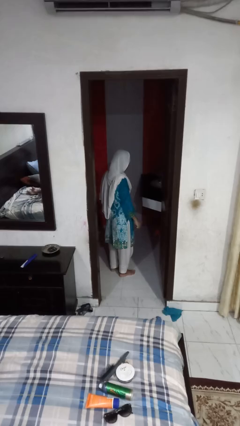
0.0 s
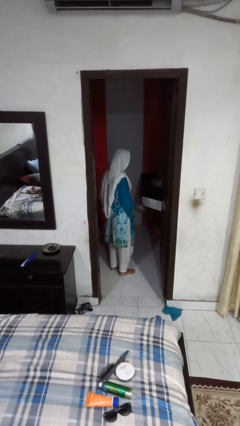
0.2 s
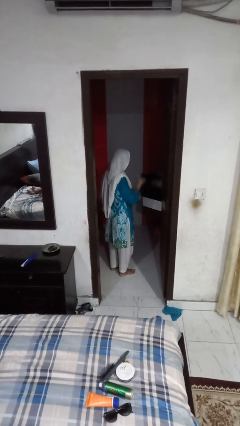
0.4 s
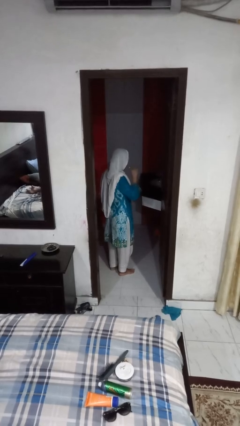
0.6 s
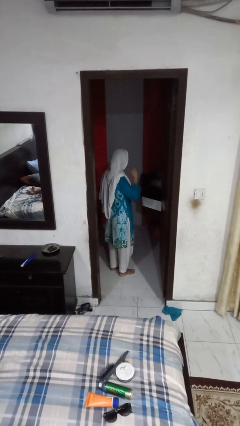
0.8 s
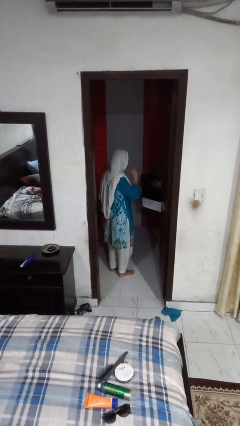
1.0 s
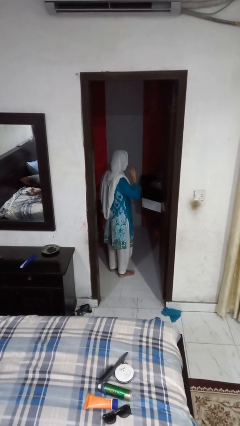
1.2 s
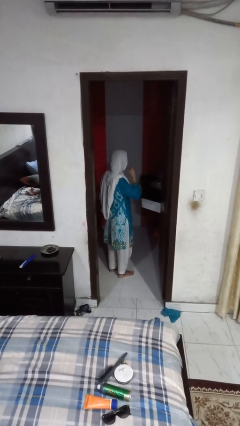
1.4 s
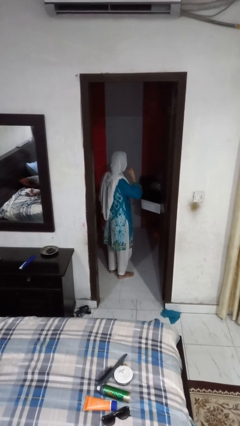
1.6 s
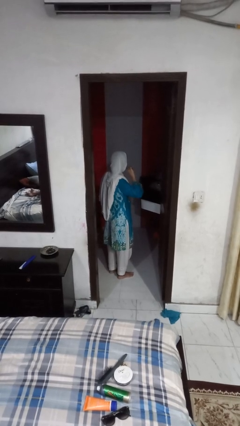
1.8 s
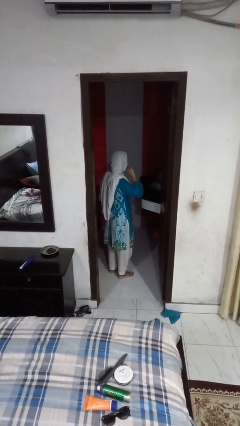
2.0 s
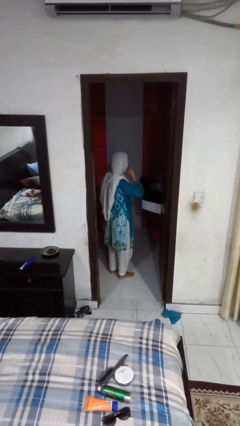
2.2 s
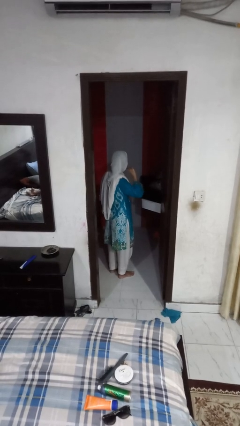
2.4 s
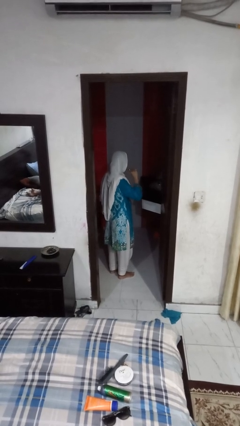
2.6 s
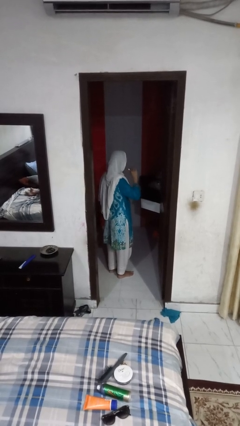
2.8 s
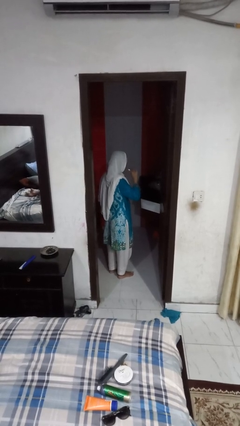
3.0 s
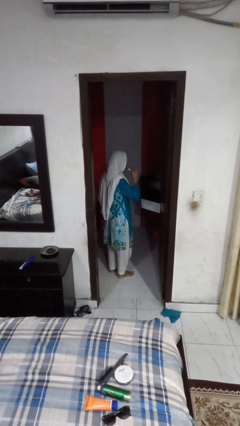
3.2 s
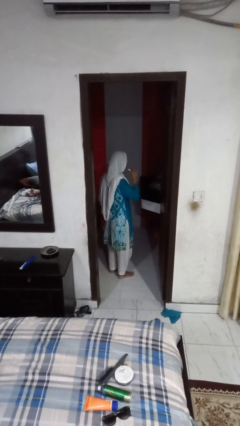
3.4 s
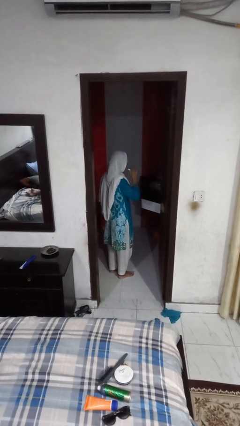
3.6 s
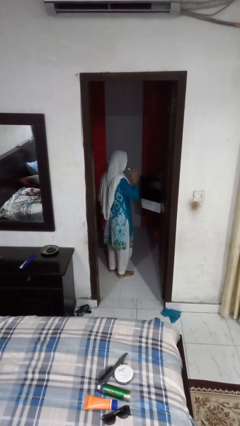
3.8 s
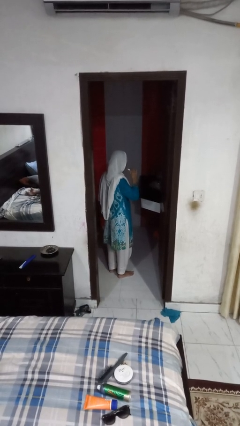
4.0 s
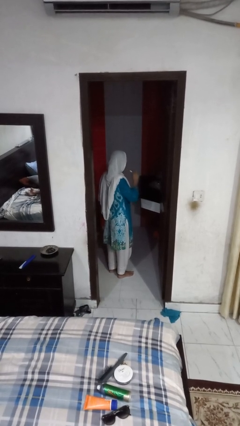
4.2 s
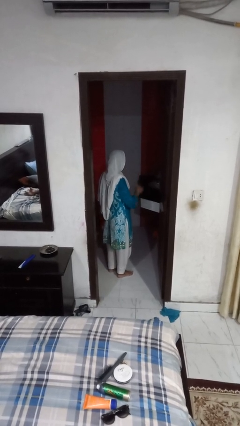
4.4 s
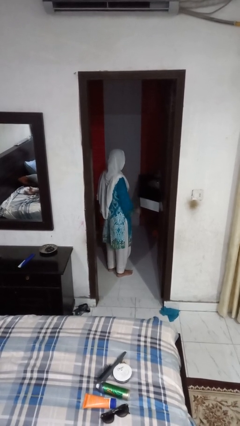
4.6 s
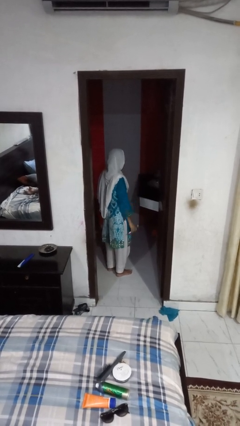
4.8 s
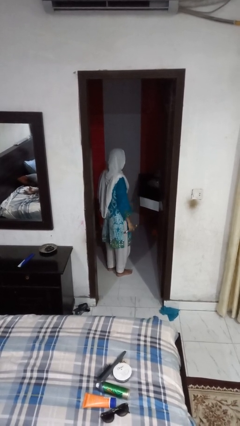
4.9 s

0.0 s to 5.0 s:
person brushes teeth

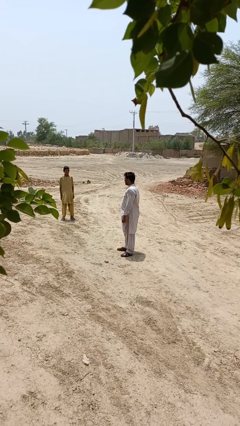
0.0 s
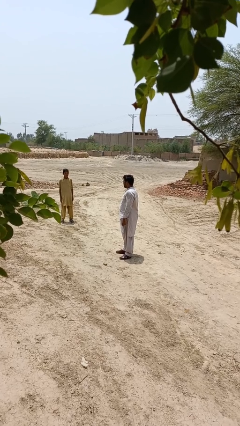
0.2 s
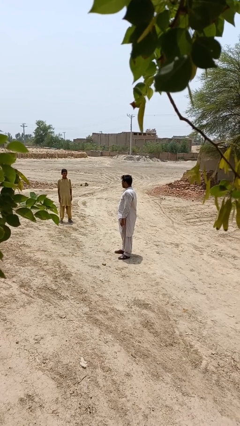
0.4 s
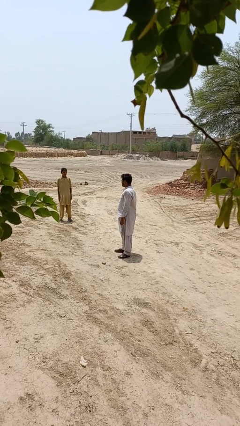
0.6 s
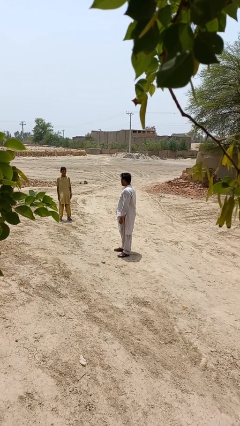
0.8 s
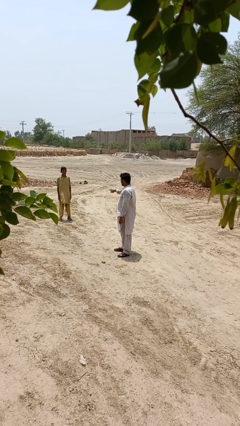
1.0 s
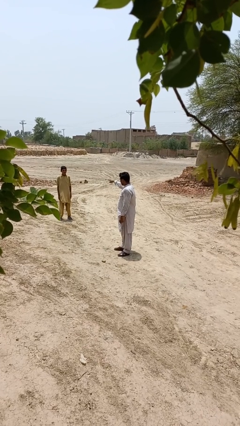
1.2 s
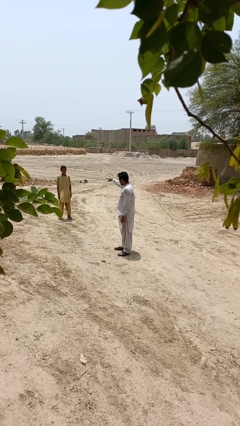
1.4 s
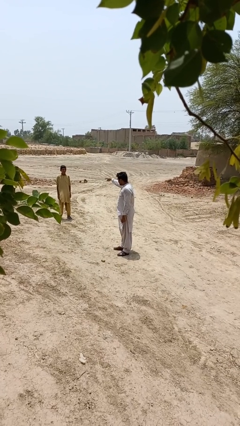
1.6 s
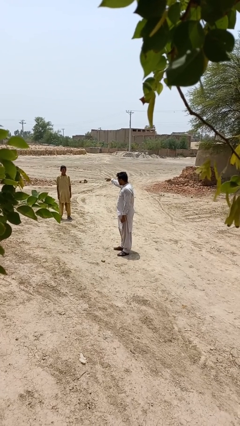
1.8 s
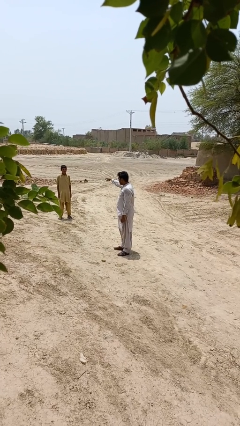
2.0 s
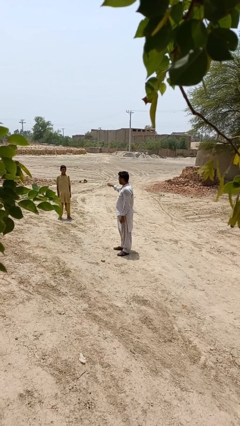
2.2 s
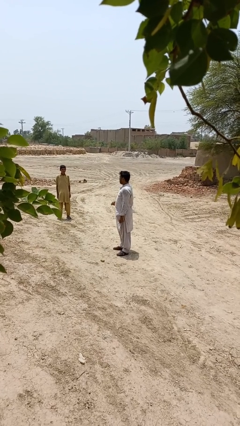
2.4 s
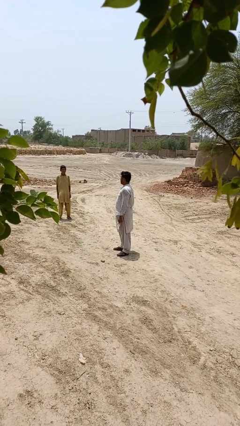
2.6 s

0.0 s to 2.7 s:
person points at person

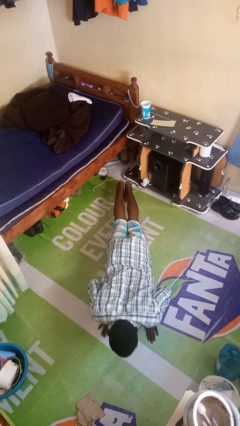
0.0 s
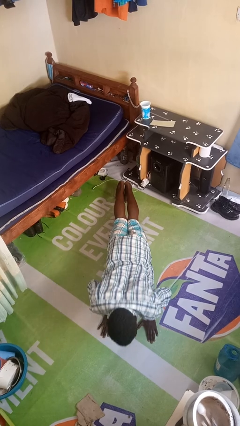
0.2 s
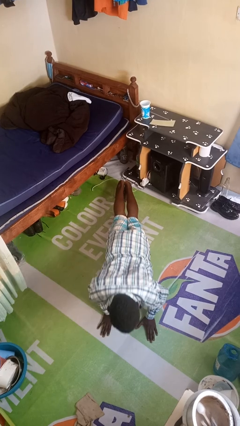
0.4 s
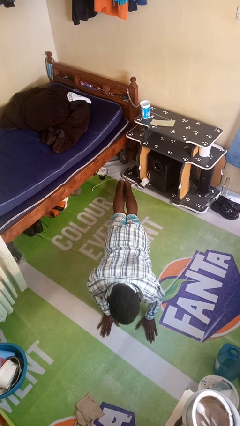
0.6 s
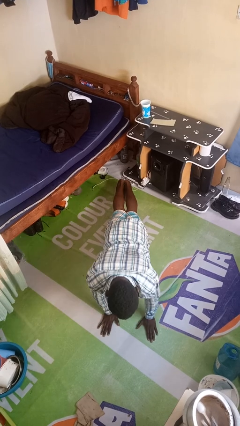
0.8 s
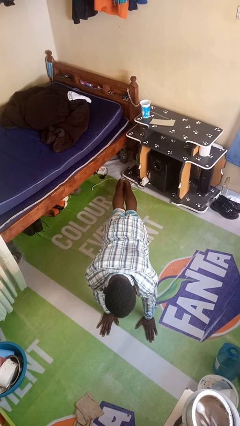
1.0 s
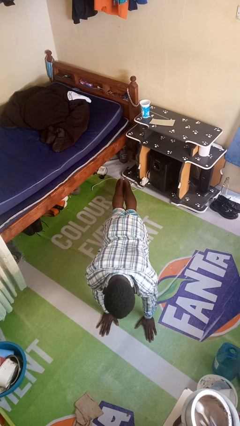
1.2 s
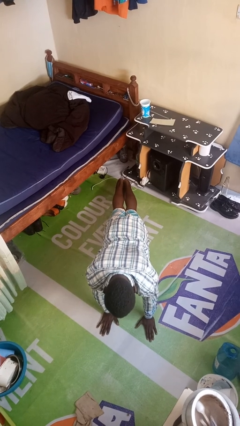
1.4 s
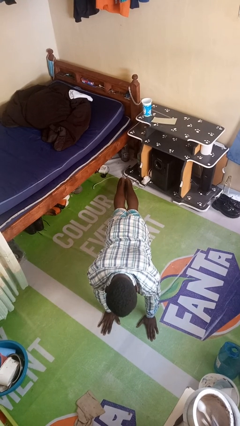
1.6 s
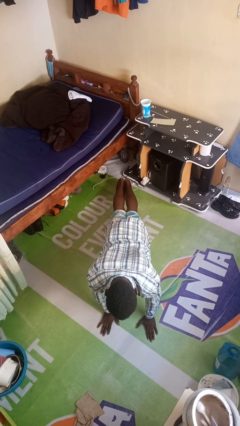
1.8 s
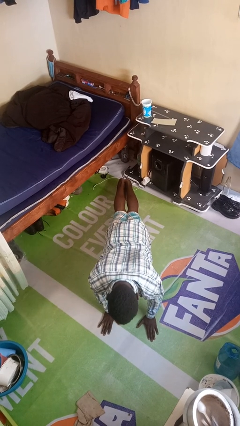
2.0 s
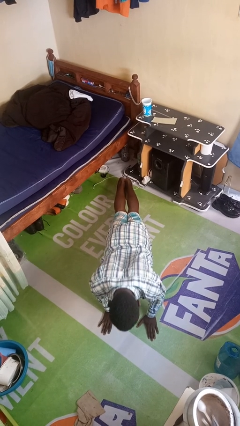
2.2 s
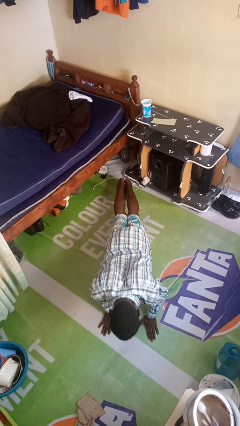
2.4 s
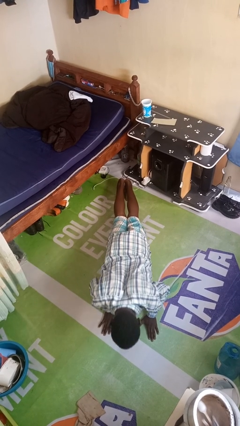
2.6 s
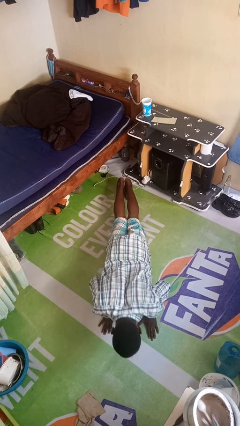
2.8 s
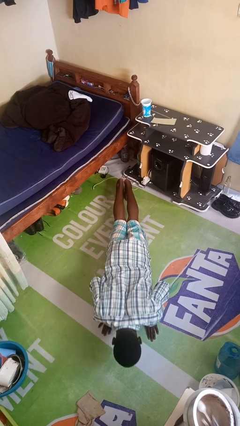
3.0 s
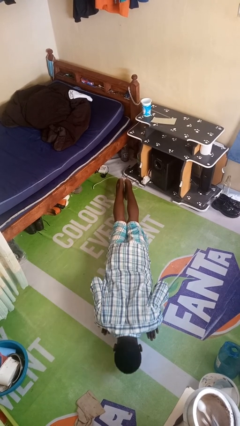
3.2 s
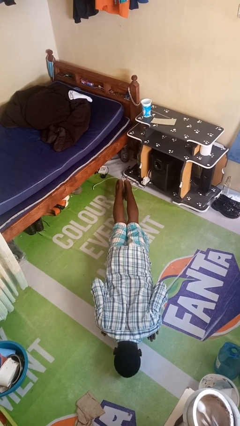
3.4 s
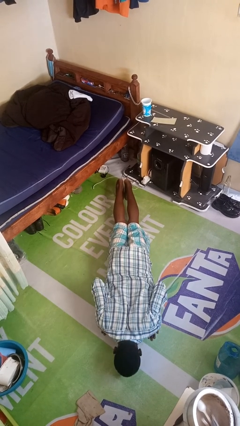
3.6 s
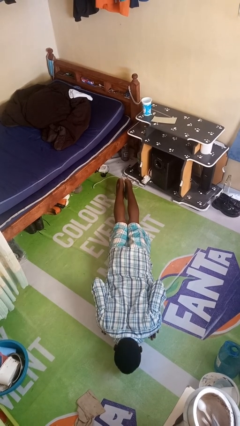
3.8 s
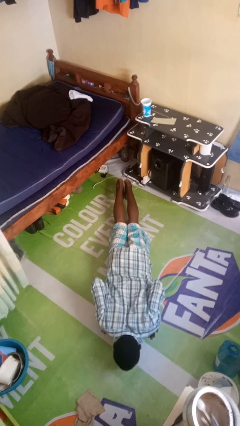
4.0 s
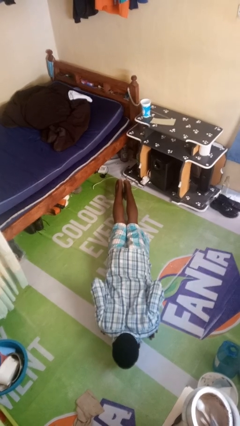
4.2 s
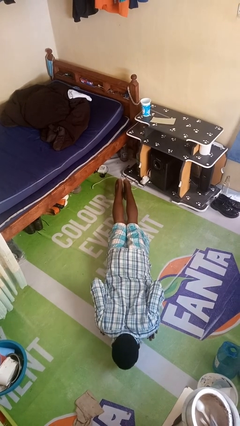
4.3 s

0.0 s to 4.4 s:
person exercises with pushup

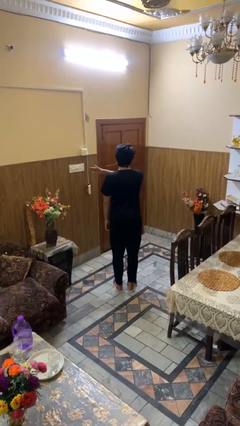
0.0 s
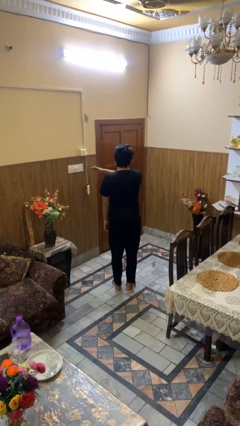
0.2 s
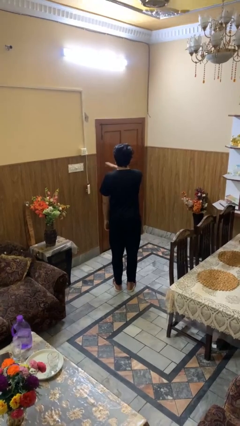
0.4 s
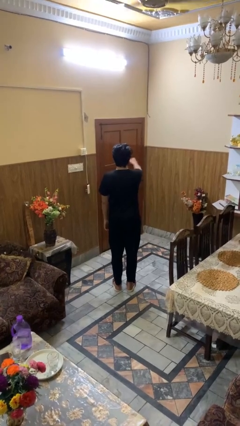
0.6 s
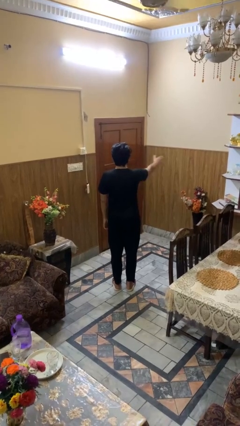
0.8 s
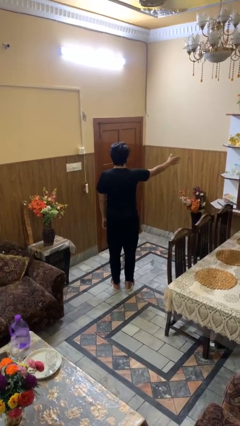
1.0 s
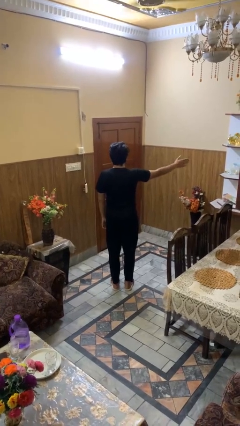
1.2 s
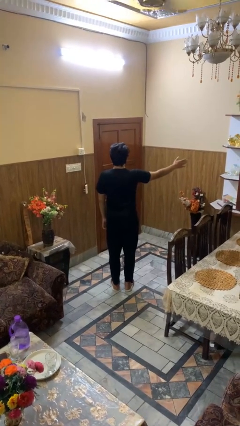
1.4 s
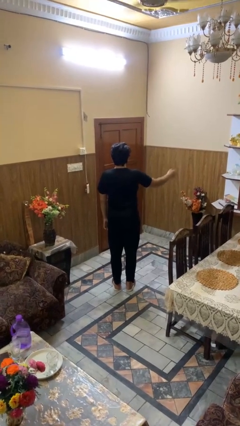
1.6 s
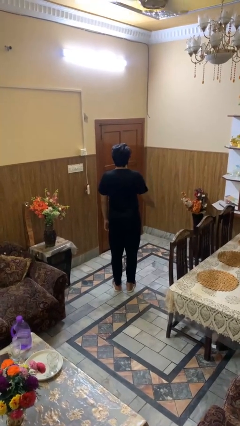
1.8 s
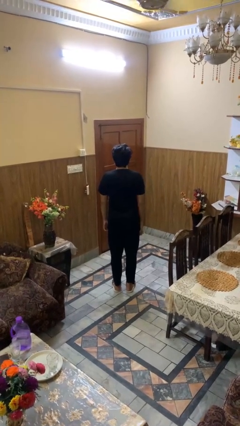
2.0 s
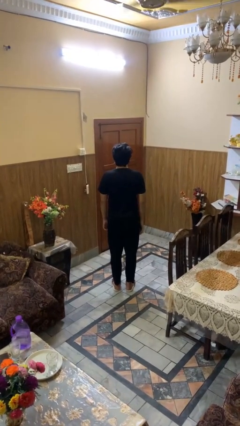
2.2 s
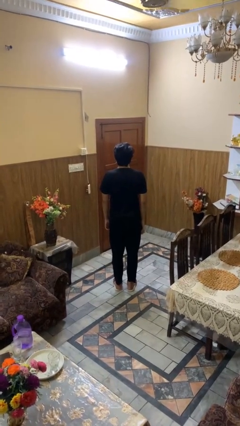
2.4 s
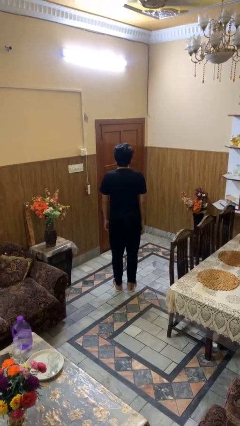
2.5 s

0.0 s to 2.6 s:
person gestures swipe right

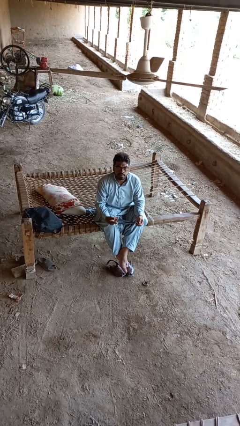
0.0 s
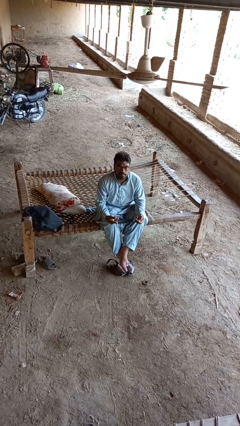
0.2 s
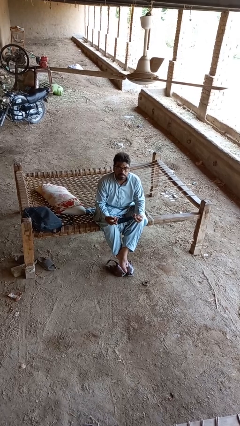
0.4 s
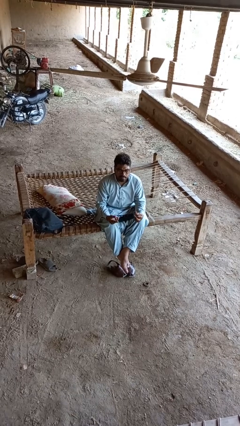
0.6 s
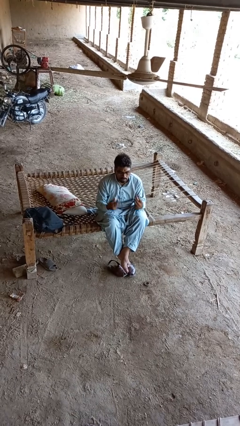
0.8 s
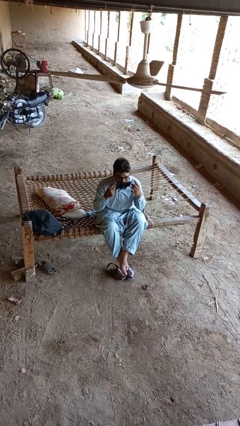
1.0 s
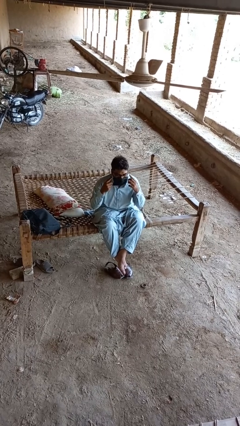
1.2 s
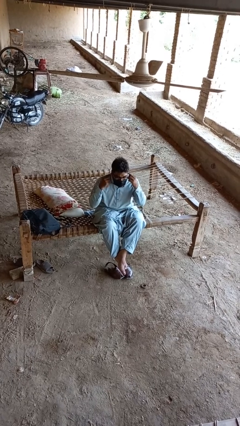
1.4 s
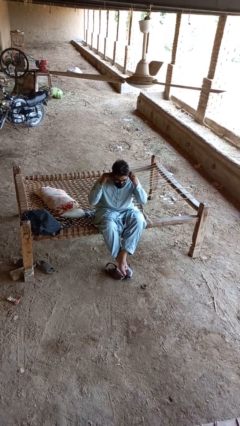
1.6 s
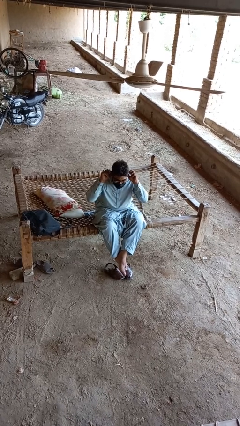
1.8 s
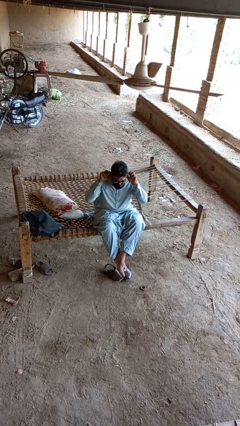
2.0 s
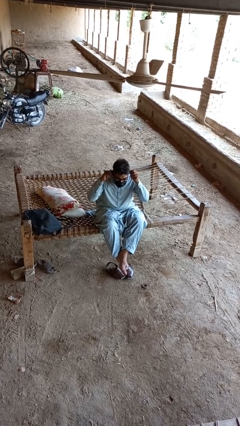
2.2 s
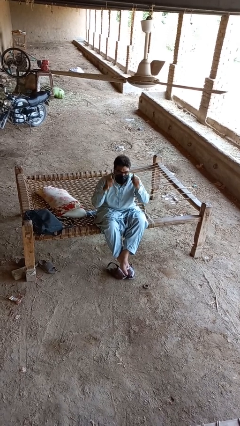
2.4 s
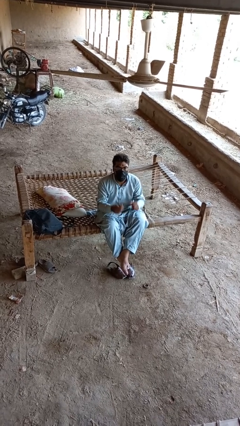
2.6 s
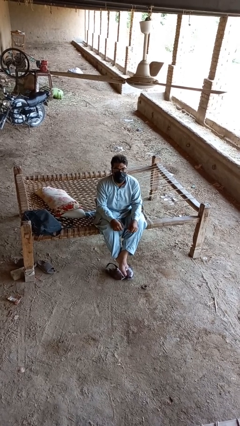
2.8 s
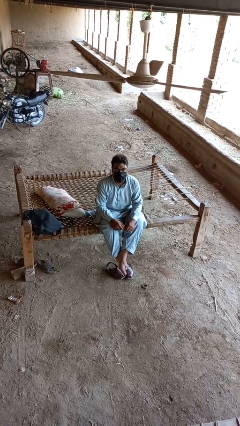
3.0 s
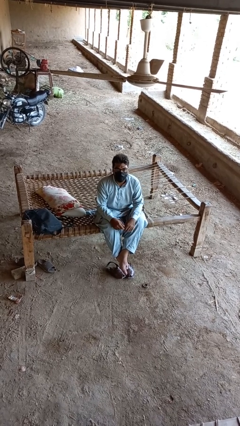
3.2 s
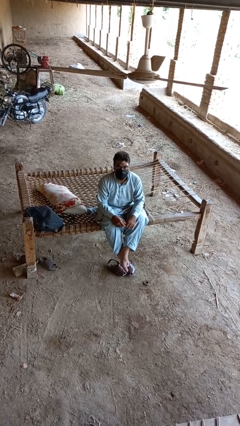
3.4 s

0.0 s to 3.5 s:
person puts on facemask
